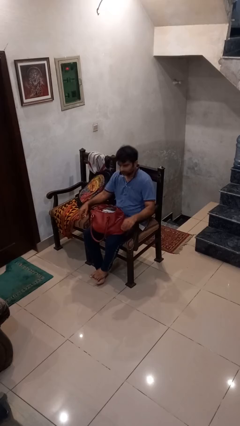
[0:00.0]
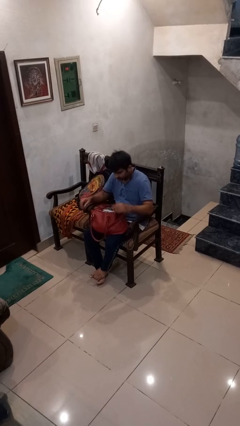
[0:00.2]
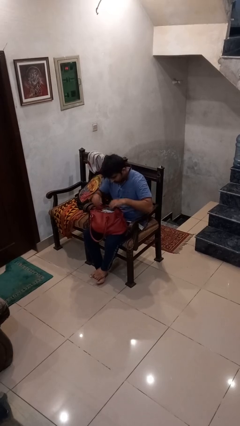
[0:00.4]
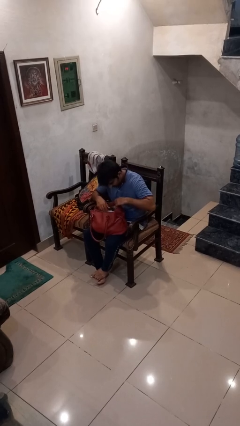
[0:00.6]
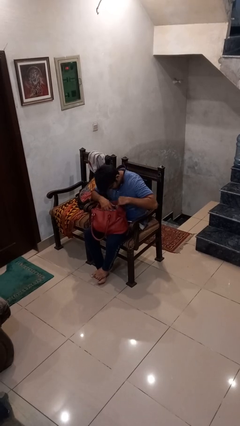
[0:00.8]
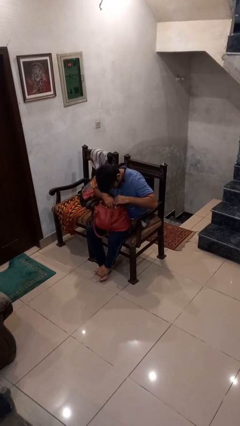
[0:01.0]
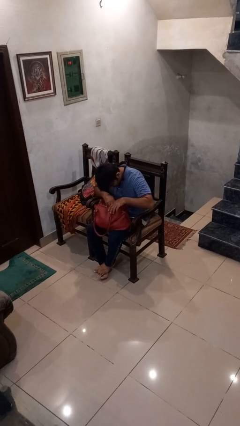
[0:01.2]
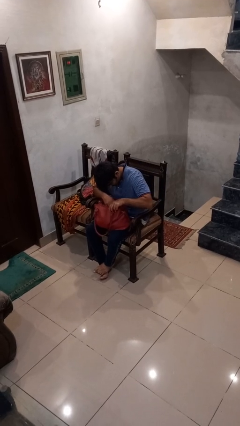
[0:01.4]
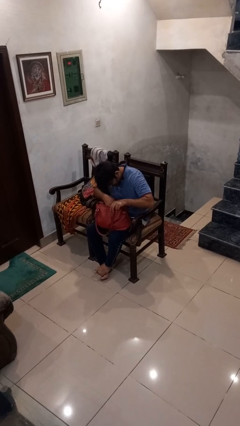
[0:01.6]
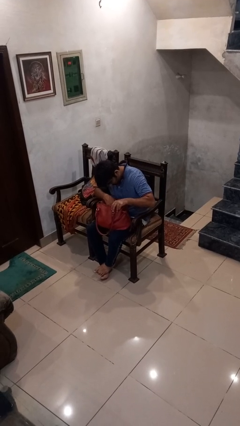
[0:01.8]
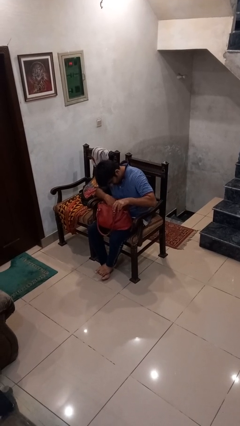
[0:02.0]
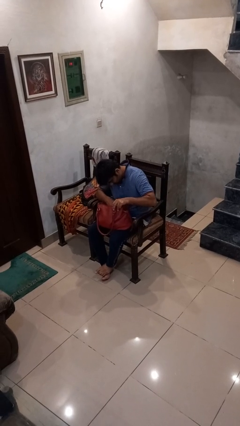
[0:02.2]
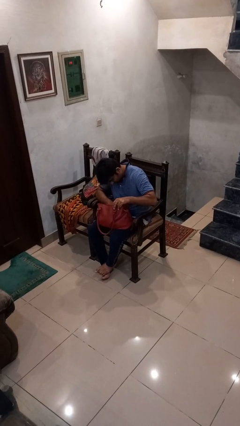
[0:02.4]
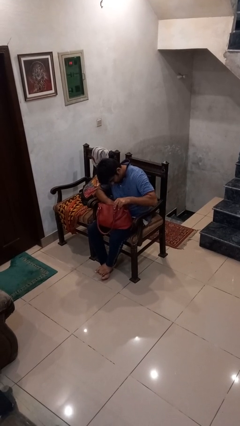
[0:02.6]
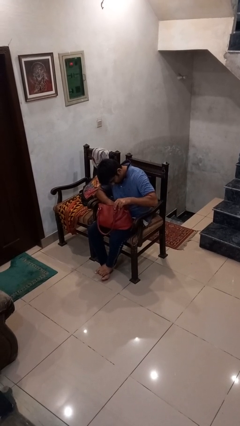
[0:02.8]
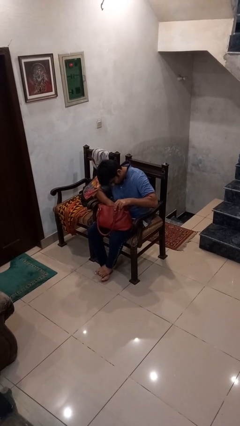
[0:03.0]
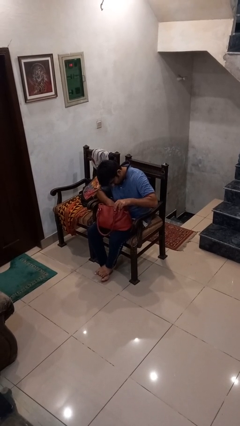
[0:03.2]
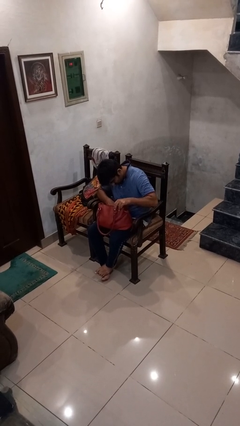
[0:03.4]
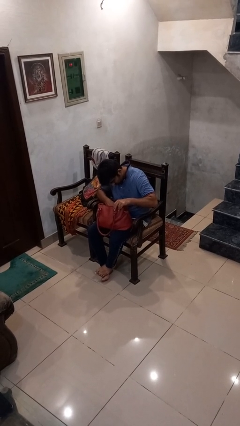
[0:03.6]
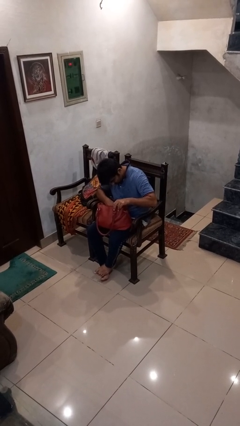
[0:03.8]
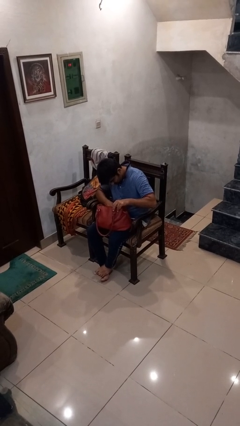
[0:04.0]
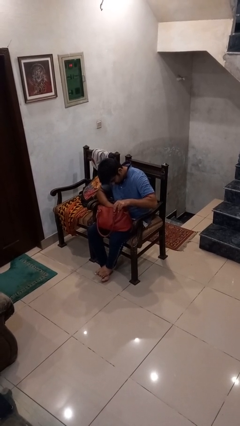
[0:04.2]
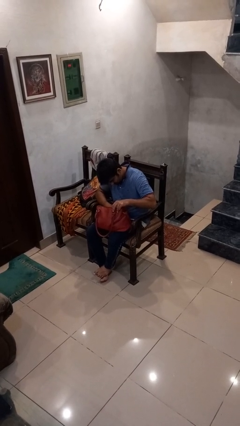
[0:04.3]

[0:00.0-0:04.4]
person searches in purse

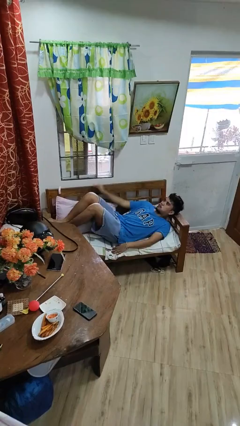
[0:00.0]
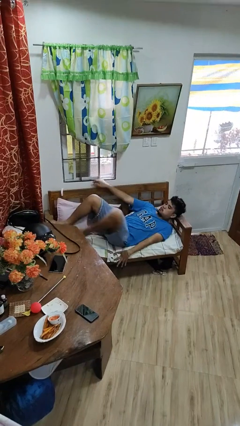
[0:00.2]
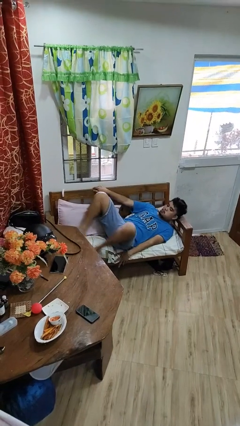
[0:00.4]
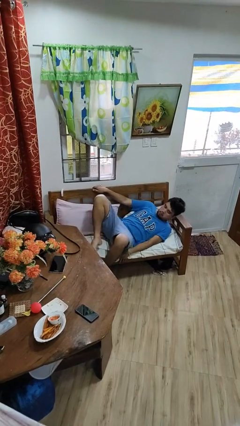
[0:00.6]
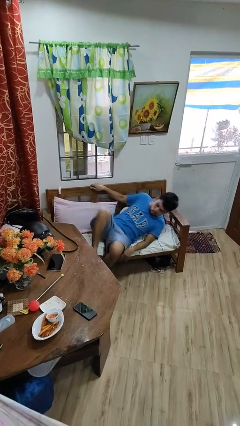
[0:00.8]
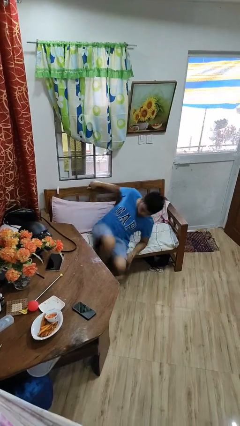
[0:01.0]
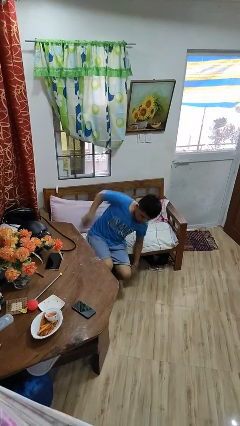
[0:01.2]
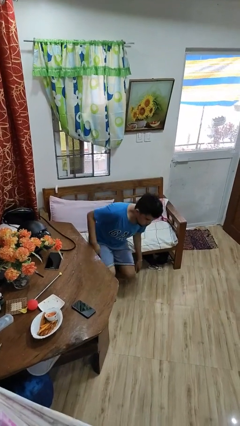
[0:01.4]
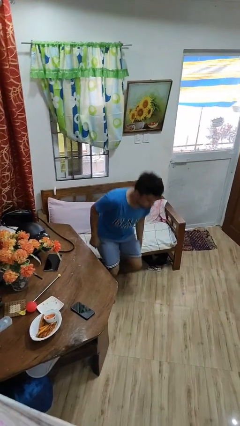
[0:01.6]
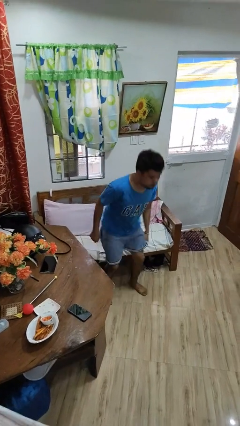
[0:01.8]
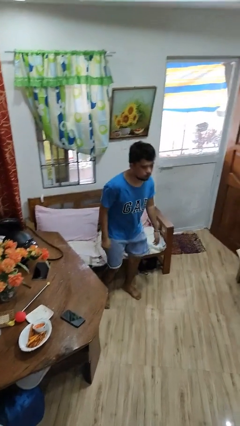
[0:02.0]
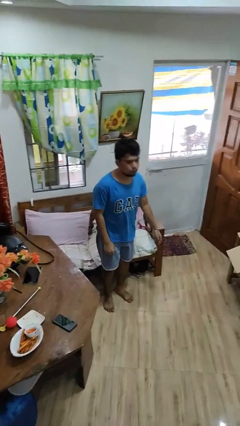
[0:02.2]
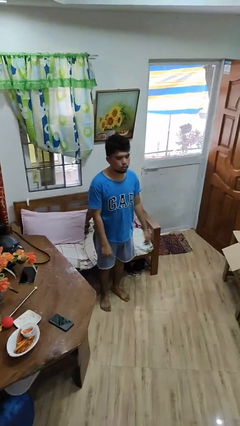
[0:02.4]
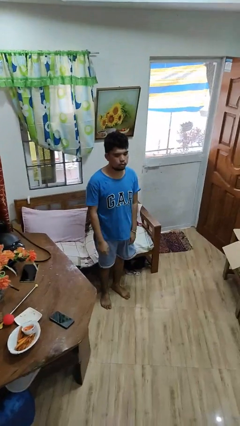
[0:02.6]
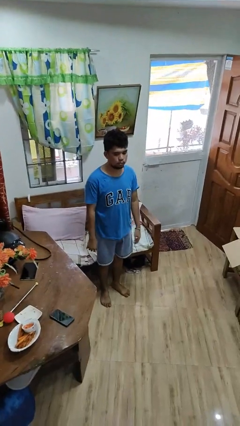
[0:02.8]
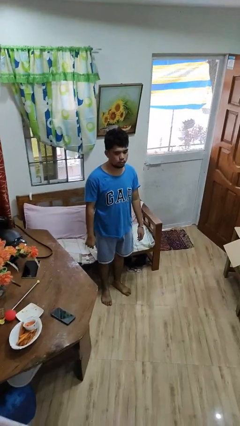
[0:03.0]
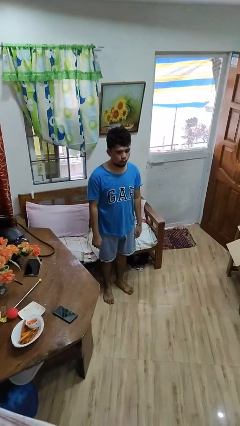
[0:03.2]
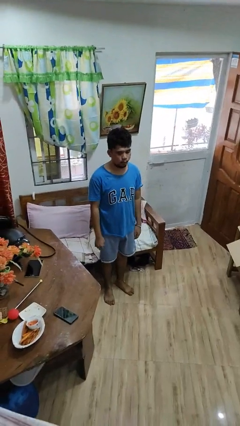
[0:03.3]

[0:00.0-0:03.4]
person stands up

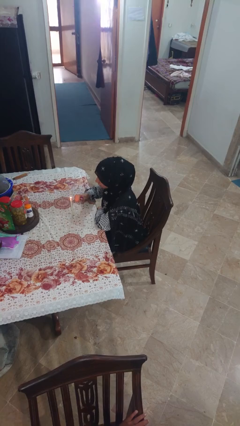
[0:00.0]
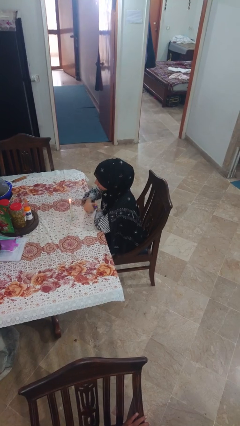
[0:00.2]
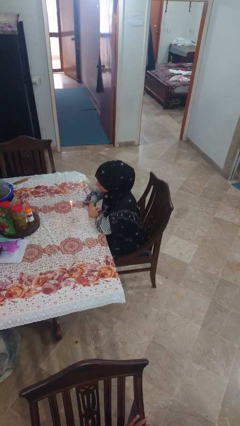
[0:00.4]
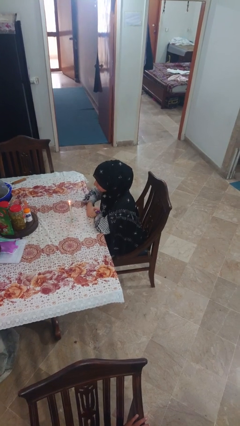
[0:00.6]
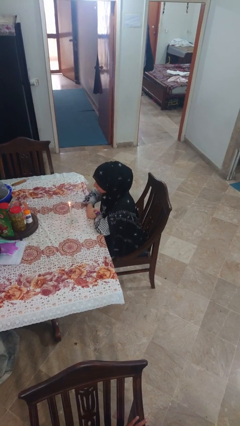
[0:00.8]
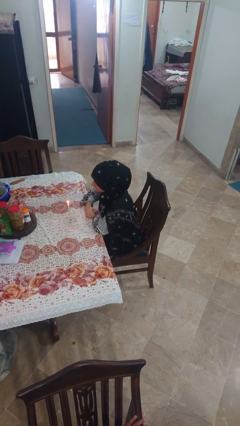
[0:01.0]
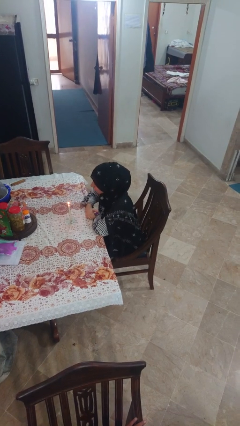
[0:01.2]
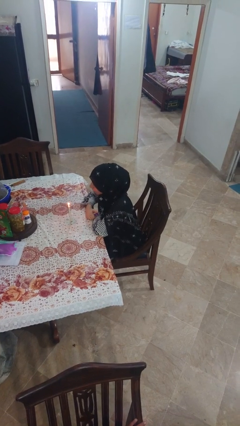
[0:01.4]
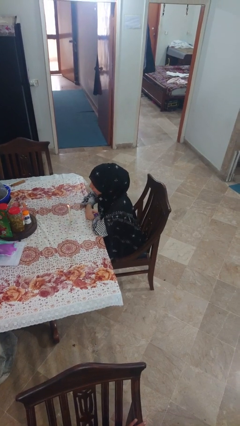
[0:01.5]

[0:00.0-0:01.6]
person extinguishes candle

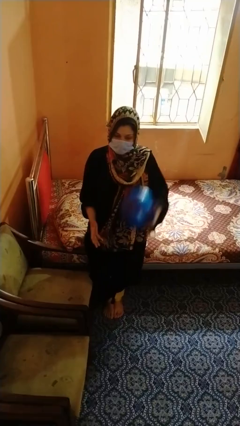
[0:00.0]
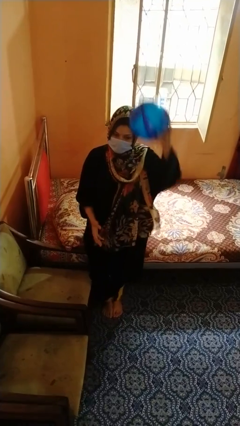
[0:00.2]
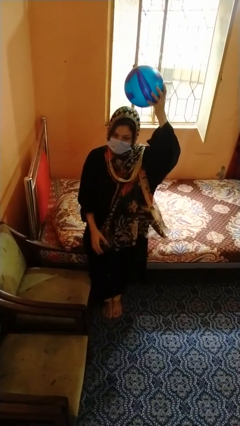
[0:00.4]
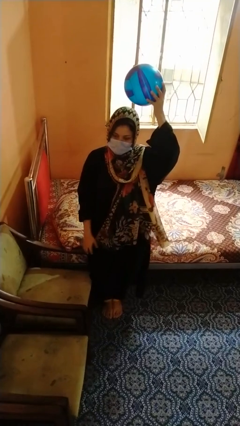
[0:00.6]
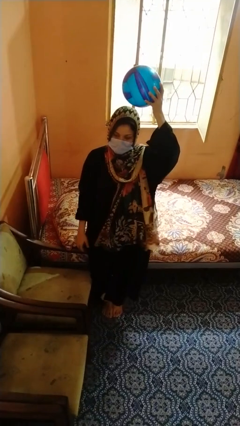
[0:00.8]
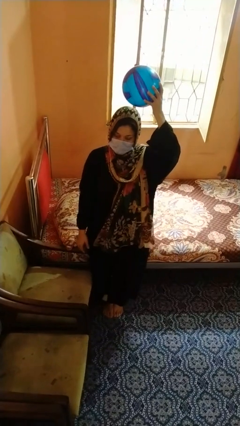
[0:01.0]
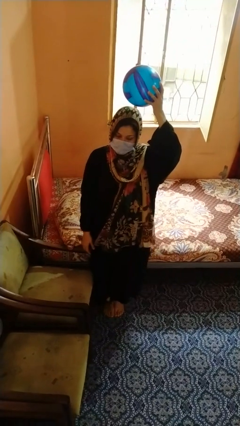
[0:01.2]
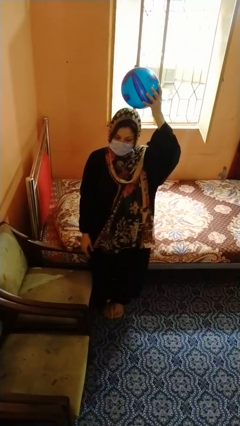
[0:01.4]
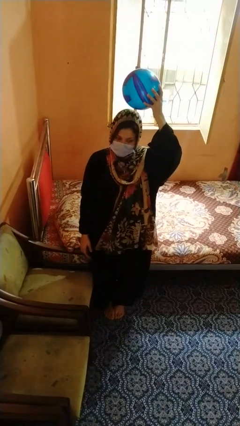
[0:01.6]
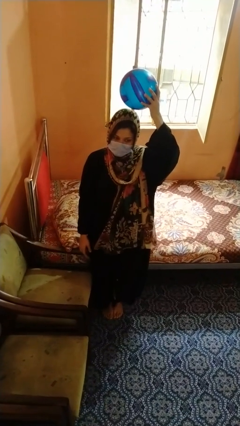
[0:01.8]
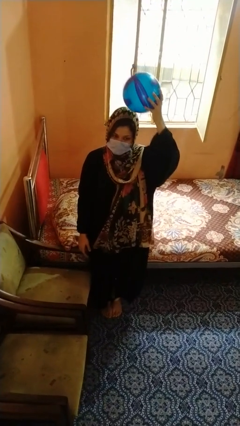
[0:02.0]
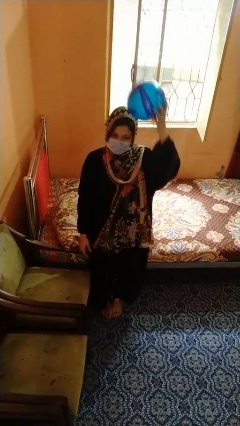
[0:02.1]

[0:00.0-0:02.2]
person holds object above head

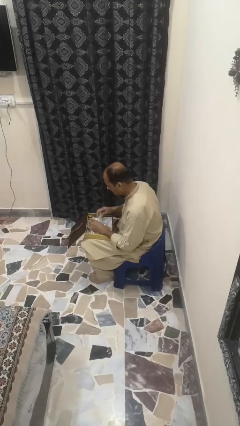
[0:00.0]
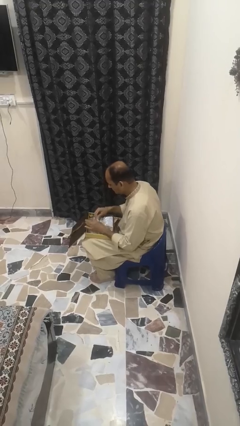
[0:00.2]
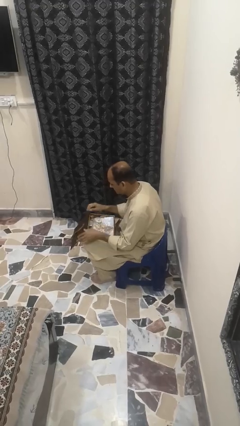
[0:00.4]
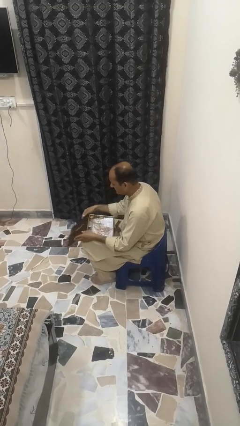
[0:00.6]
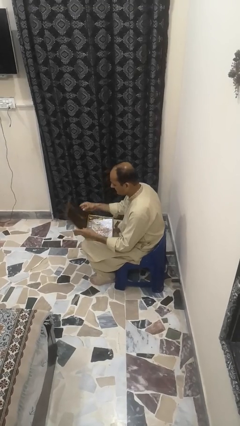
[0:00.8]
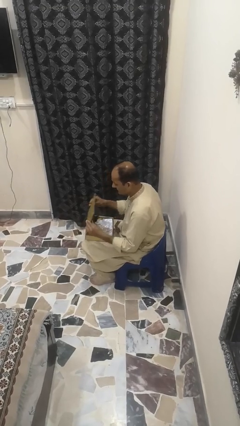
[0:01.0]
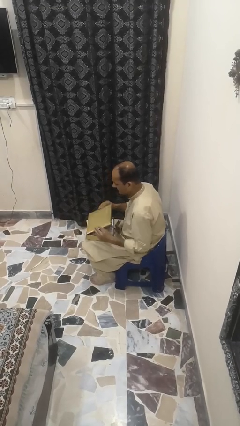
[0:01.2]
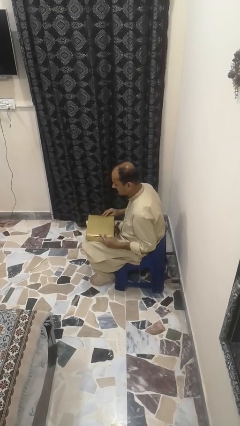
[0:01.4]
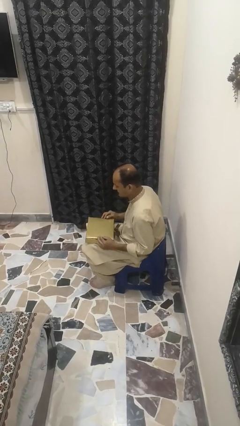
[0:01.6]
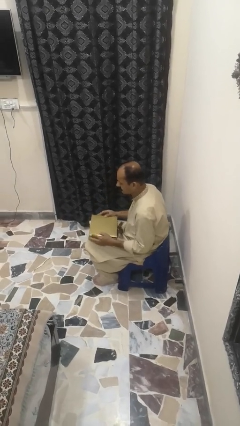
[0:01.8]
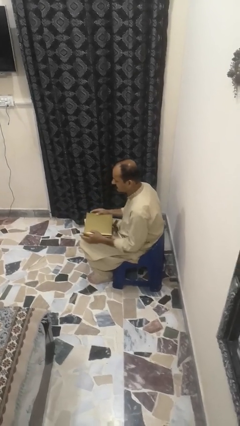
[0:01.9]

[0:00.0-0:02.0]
person closes jewelry box

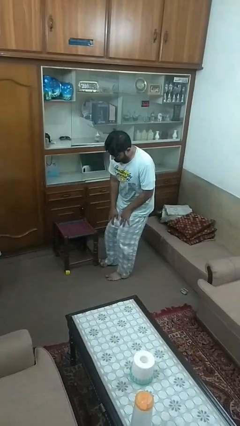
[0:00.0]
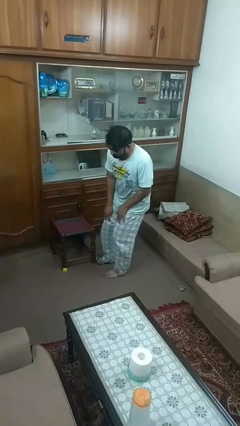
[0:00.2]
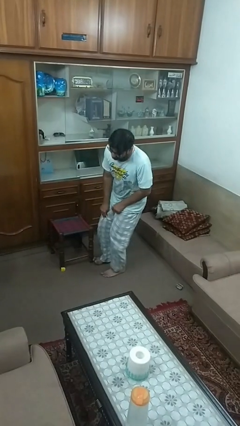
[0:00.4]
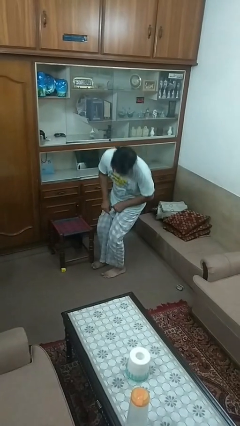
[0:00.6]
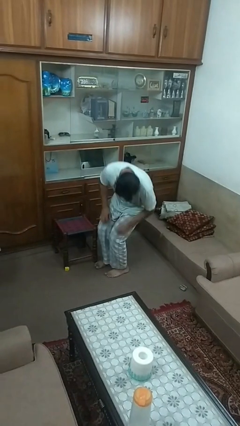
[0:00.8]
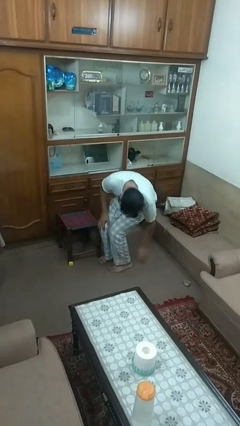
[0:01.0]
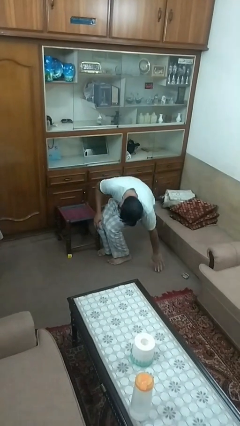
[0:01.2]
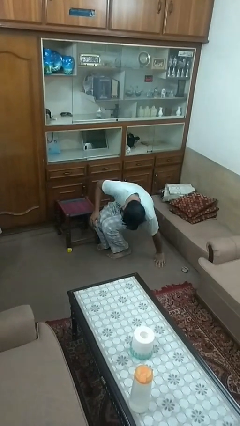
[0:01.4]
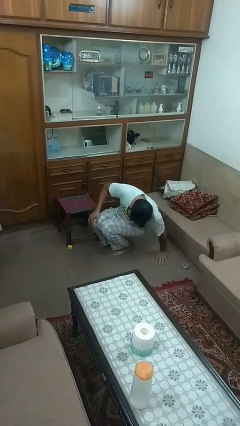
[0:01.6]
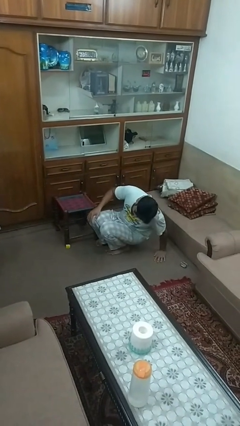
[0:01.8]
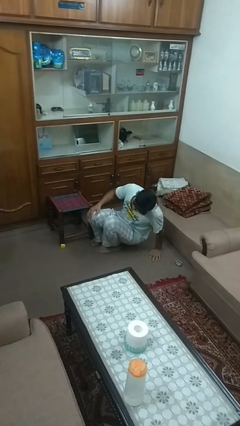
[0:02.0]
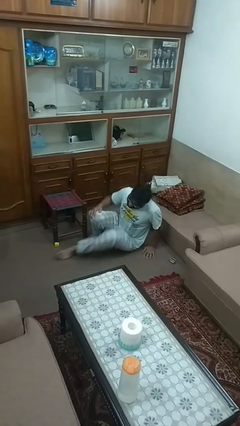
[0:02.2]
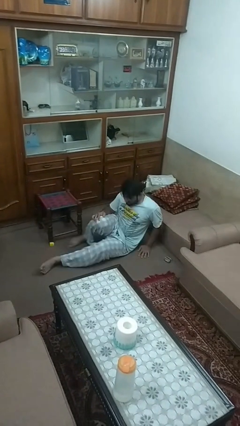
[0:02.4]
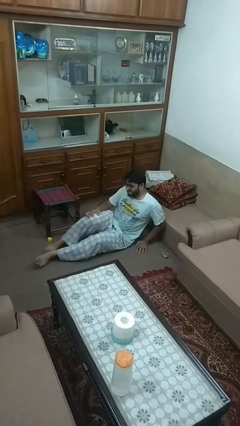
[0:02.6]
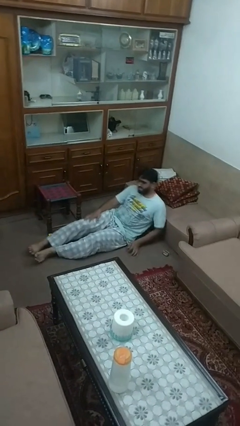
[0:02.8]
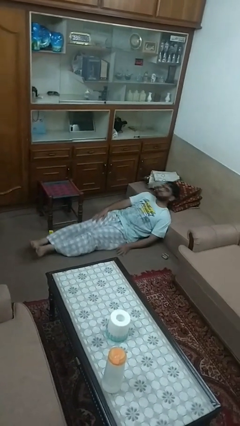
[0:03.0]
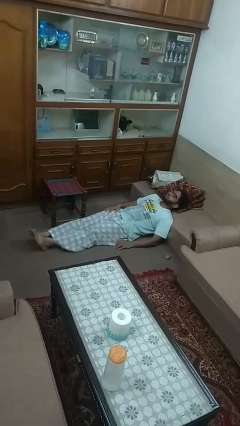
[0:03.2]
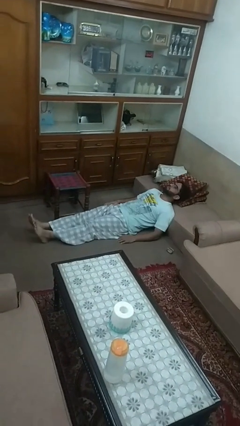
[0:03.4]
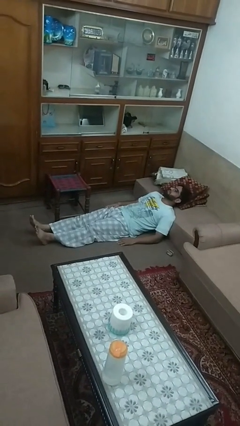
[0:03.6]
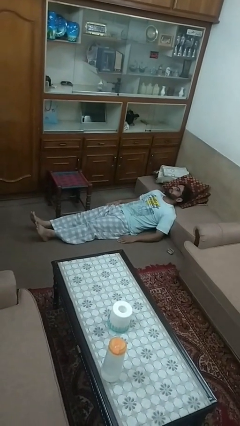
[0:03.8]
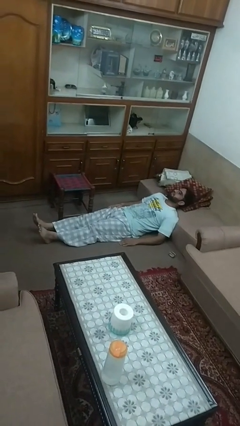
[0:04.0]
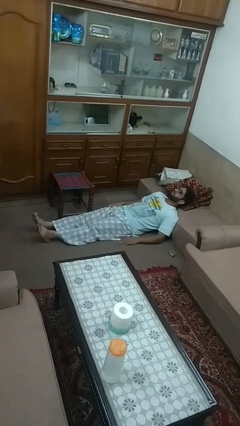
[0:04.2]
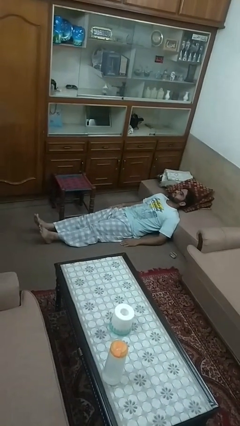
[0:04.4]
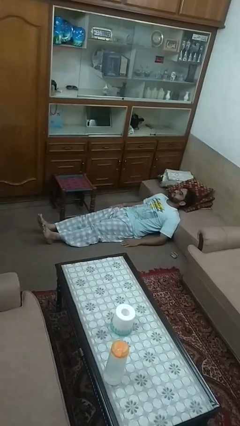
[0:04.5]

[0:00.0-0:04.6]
person lies down on floor
